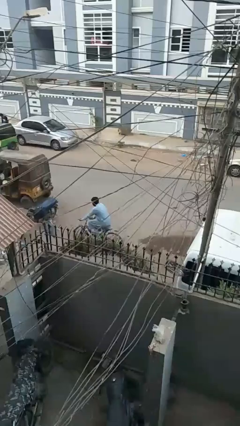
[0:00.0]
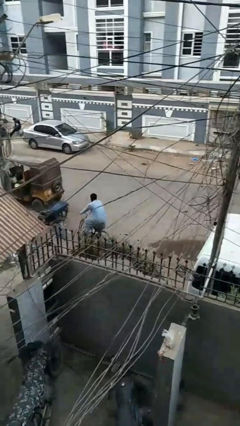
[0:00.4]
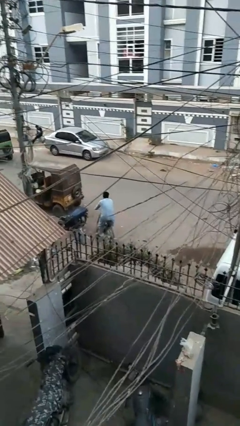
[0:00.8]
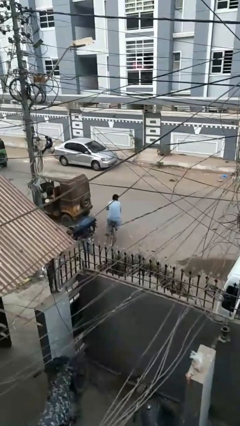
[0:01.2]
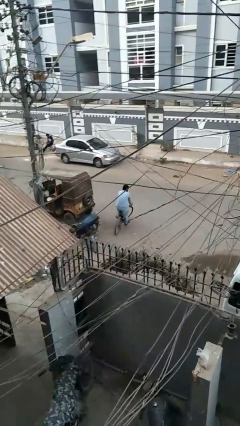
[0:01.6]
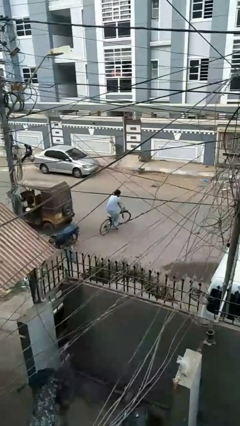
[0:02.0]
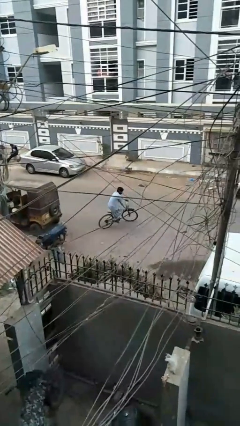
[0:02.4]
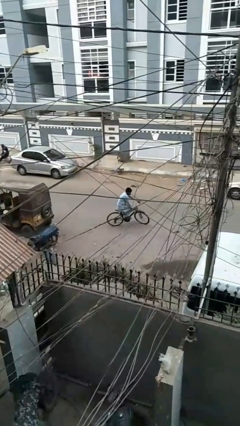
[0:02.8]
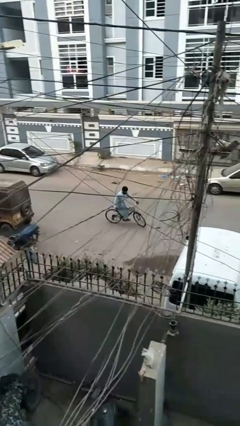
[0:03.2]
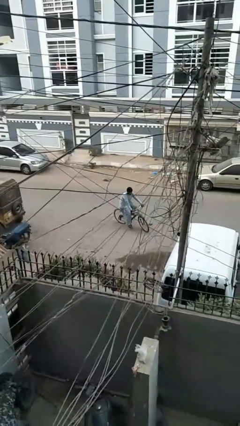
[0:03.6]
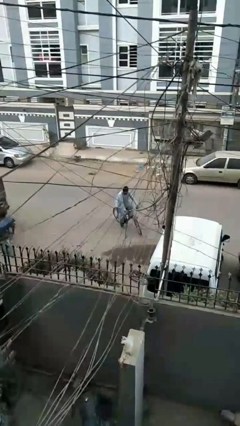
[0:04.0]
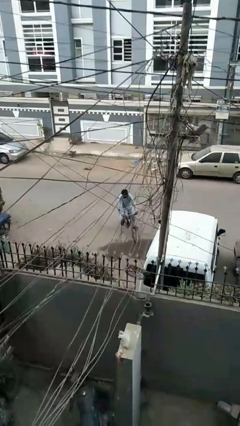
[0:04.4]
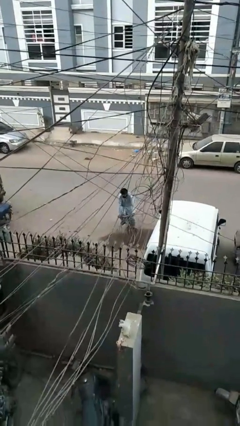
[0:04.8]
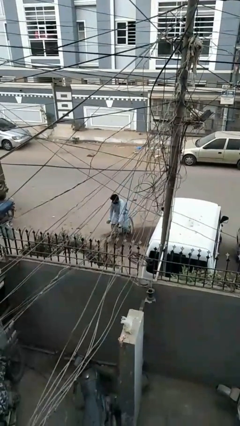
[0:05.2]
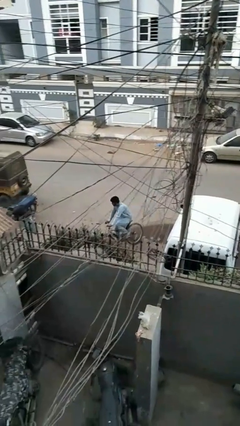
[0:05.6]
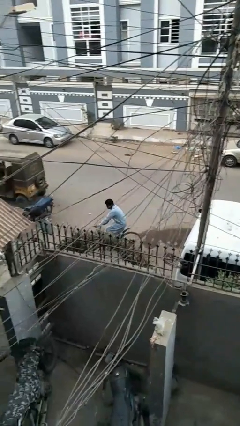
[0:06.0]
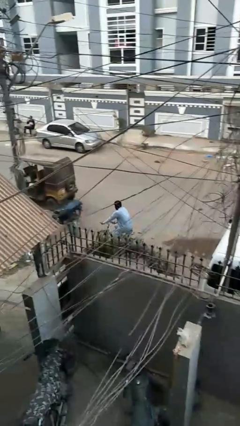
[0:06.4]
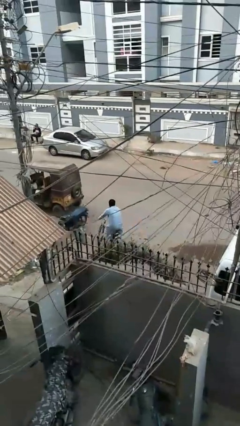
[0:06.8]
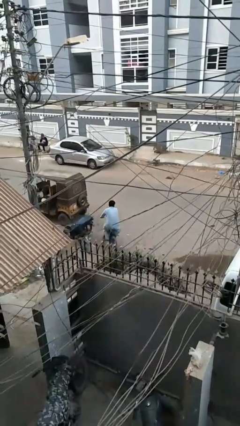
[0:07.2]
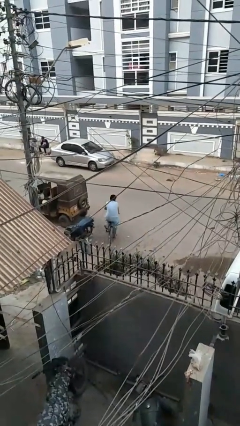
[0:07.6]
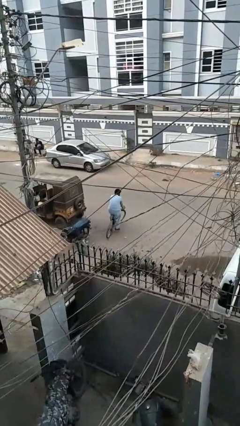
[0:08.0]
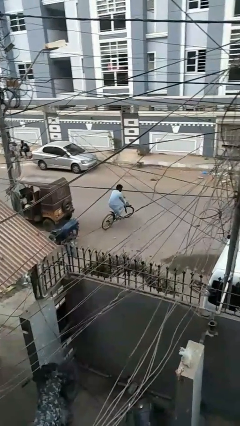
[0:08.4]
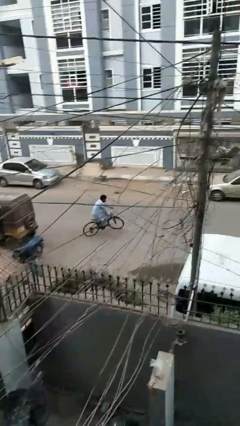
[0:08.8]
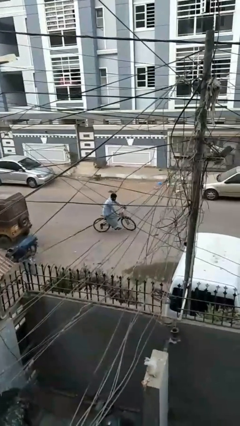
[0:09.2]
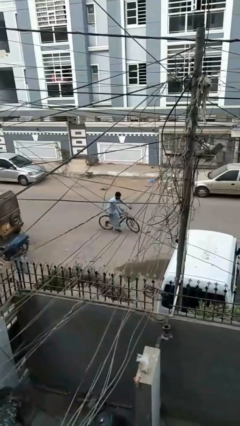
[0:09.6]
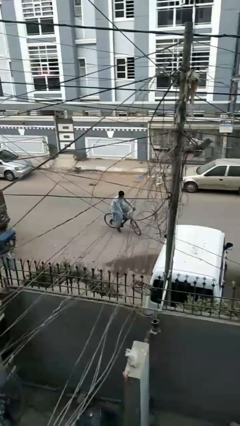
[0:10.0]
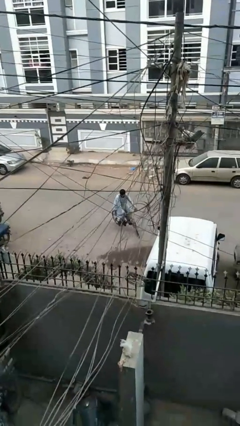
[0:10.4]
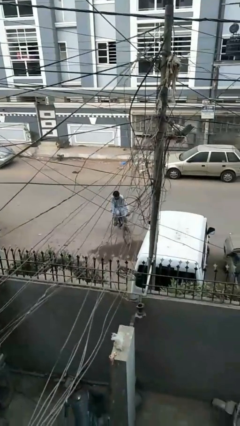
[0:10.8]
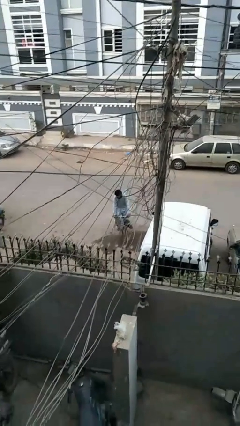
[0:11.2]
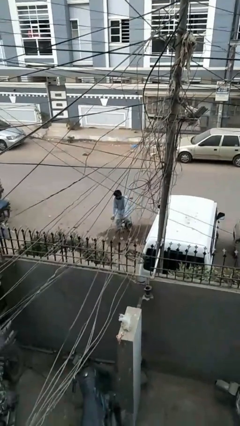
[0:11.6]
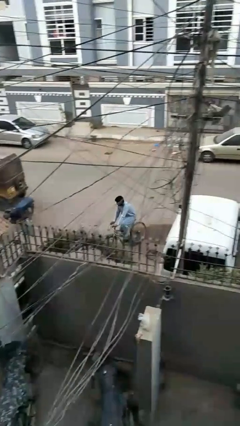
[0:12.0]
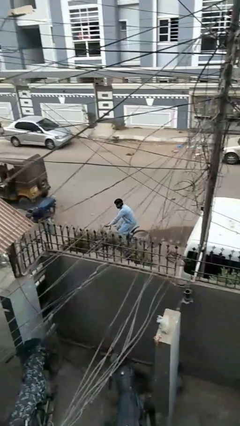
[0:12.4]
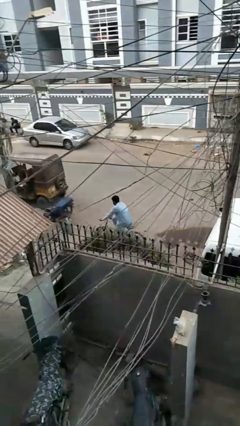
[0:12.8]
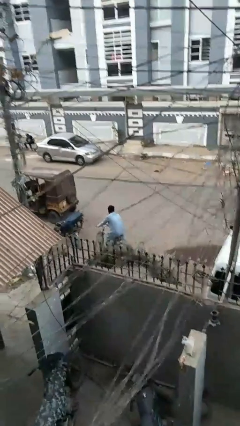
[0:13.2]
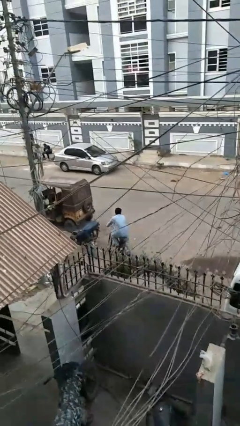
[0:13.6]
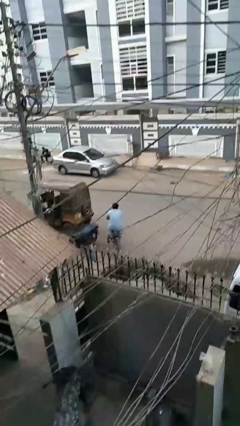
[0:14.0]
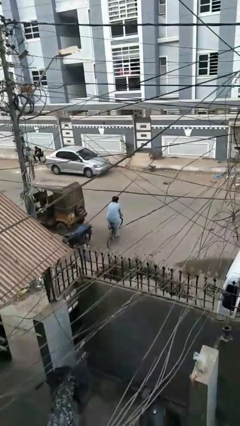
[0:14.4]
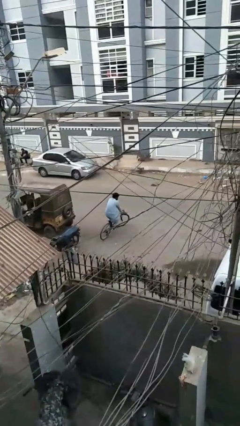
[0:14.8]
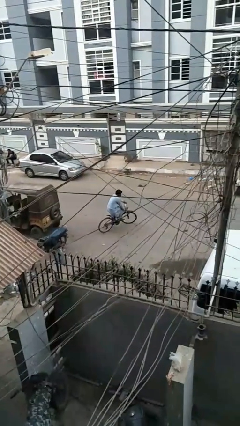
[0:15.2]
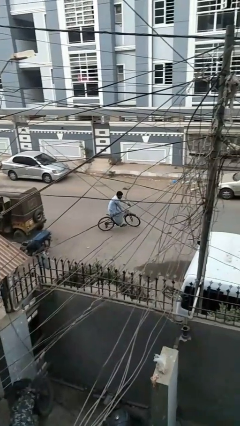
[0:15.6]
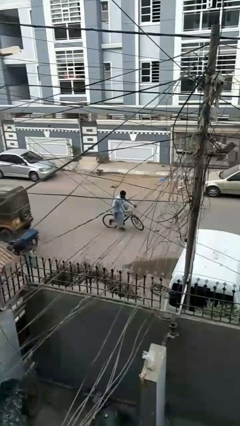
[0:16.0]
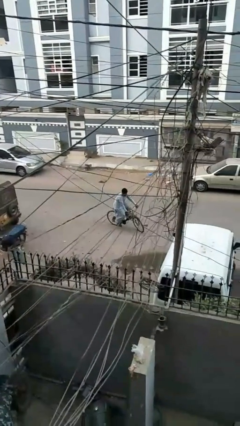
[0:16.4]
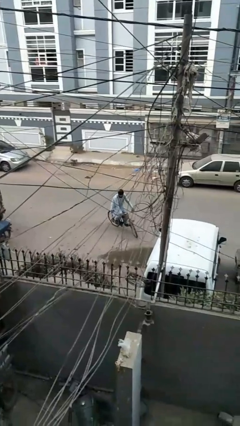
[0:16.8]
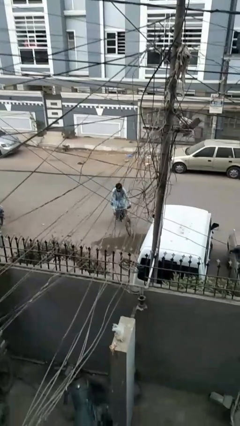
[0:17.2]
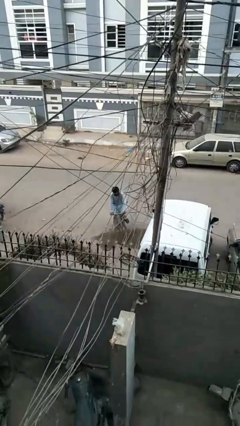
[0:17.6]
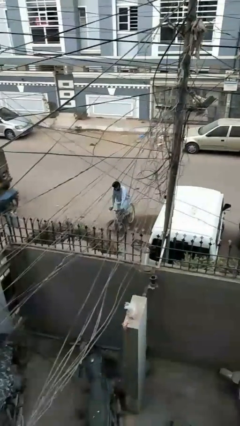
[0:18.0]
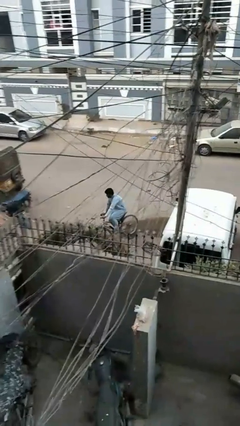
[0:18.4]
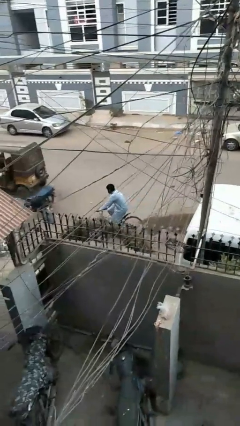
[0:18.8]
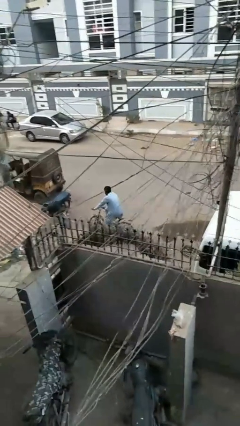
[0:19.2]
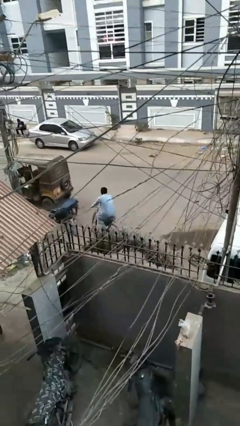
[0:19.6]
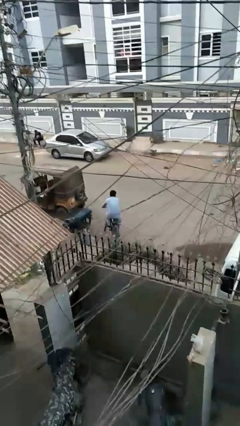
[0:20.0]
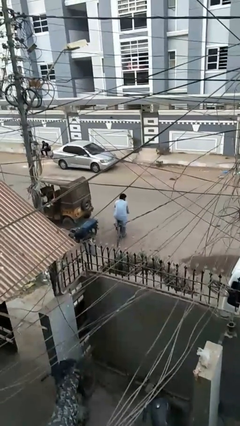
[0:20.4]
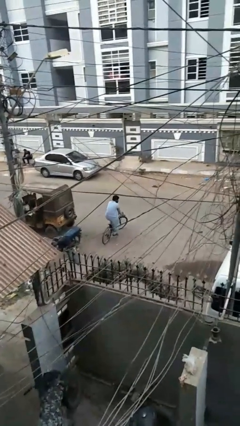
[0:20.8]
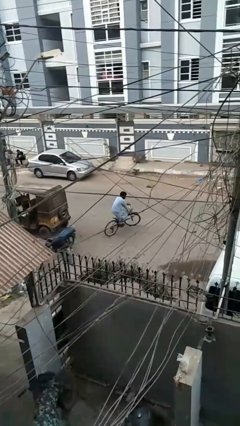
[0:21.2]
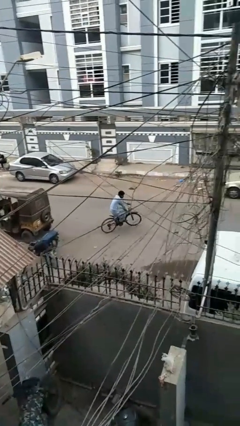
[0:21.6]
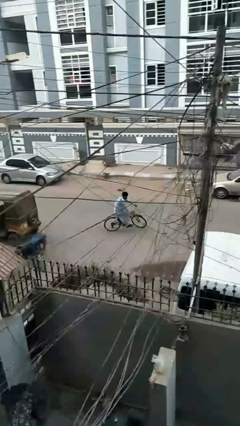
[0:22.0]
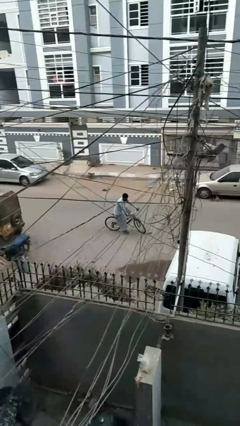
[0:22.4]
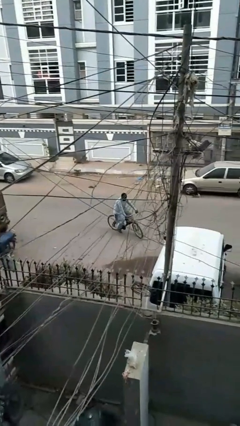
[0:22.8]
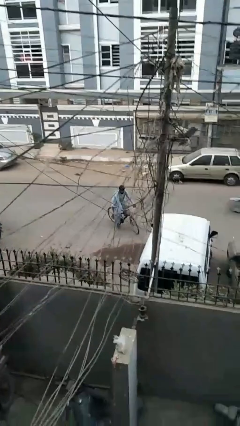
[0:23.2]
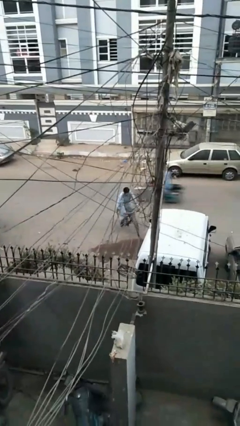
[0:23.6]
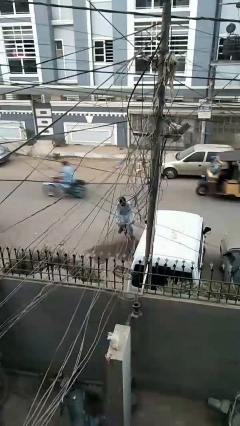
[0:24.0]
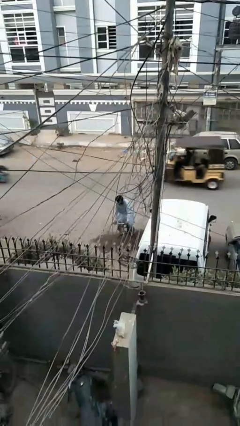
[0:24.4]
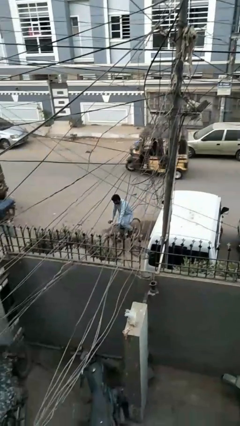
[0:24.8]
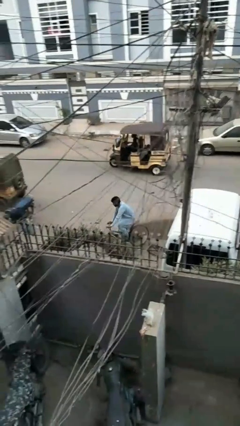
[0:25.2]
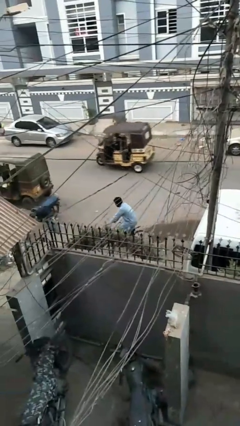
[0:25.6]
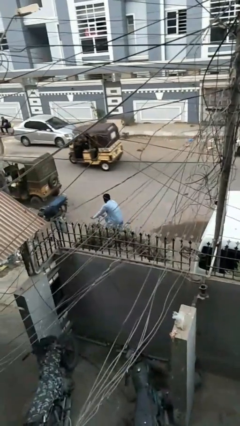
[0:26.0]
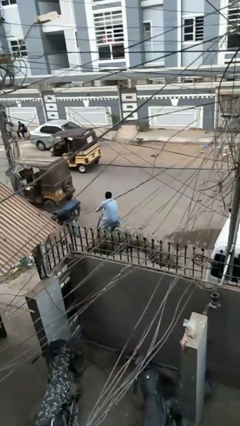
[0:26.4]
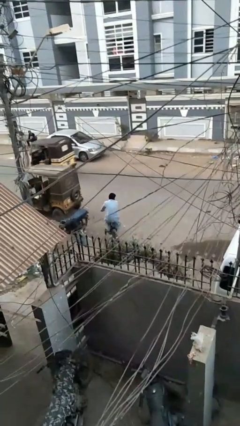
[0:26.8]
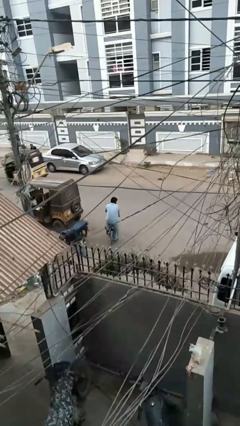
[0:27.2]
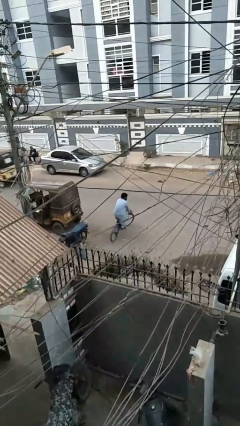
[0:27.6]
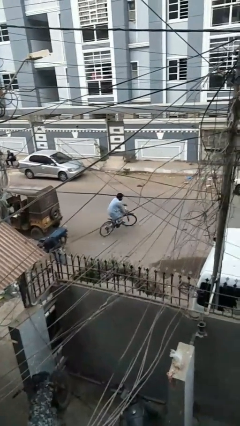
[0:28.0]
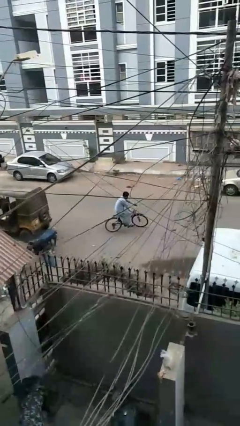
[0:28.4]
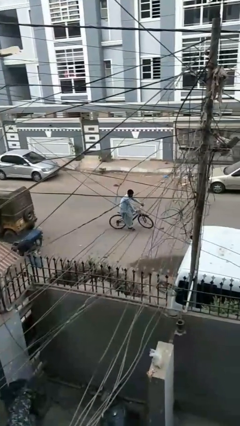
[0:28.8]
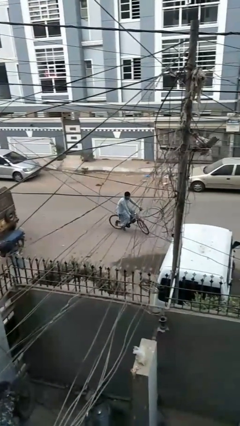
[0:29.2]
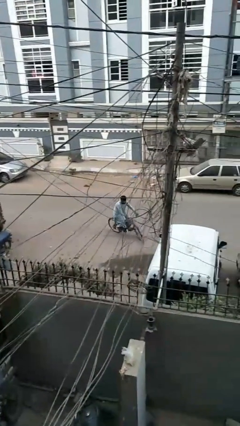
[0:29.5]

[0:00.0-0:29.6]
person rides bicycle

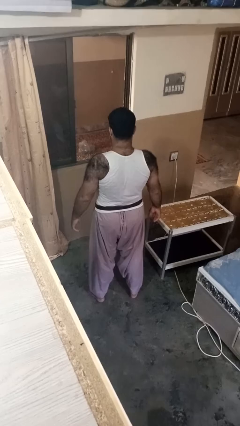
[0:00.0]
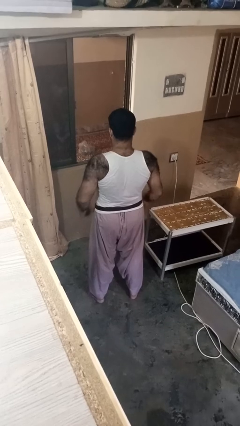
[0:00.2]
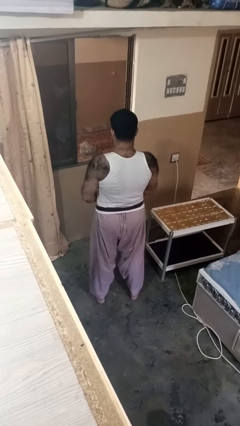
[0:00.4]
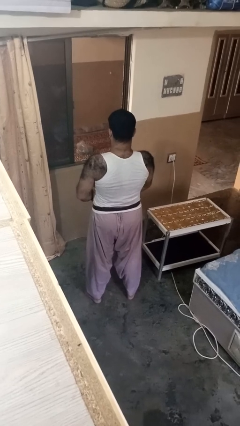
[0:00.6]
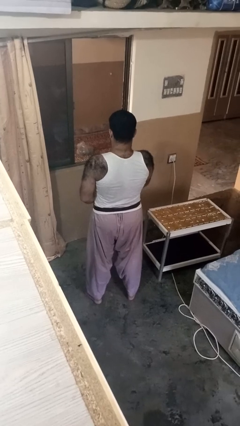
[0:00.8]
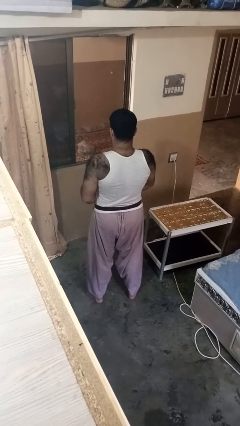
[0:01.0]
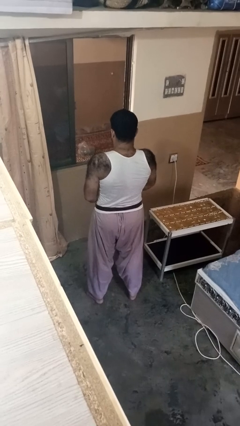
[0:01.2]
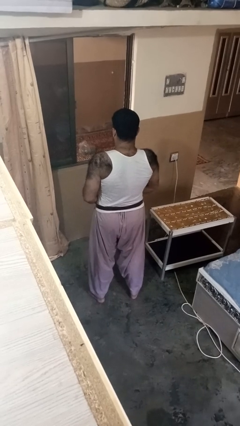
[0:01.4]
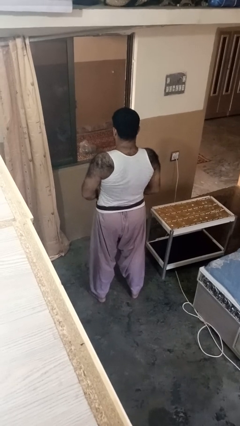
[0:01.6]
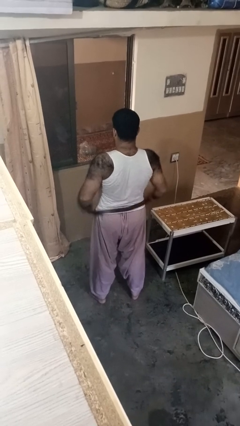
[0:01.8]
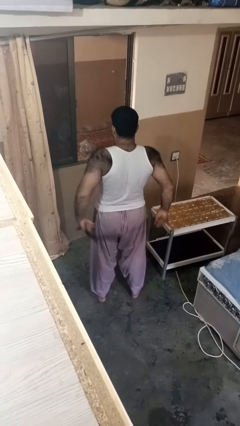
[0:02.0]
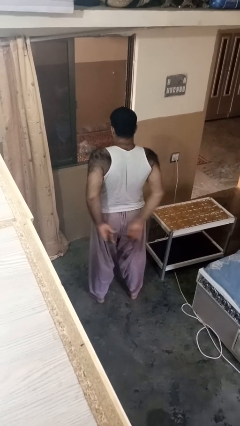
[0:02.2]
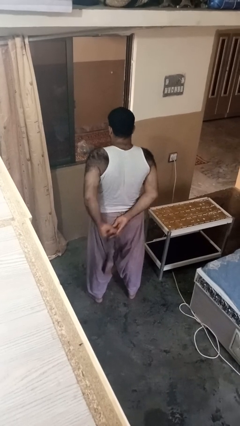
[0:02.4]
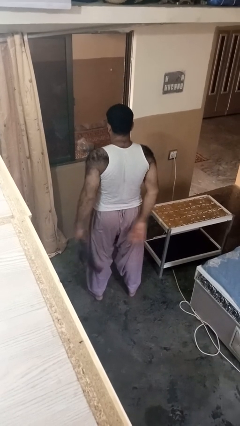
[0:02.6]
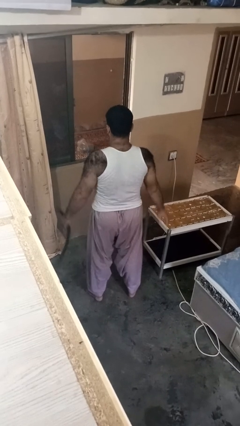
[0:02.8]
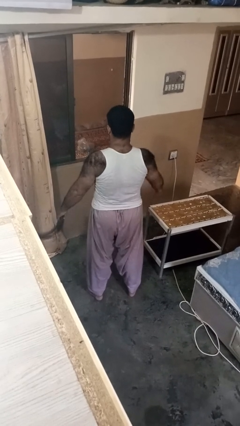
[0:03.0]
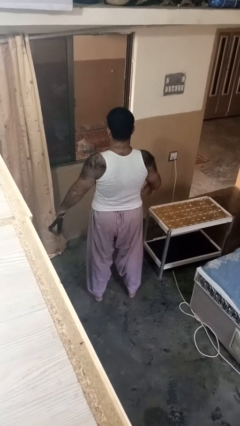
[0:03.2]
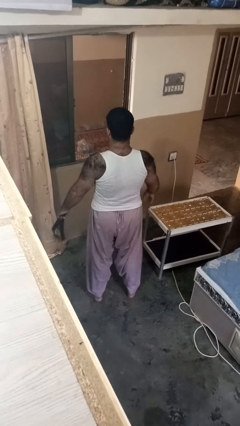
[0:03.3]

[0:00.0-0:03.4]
person takes off belt

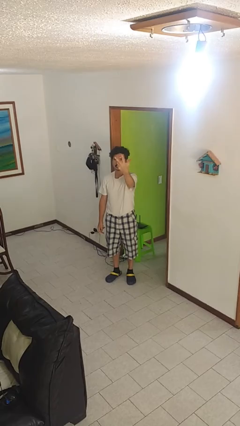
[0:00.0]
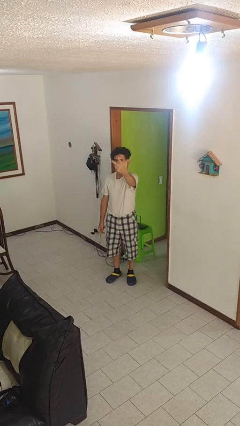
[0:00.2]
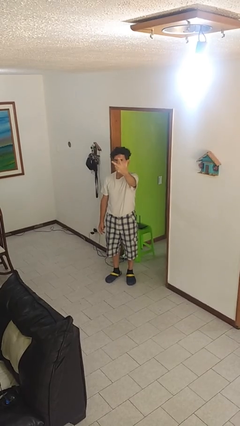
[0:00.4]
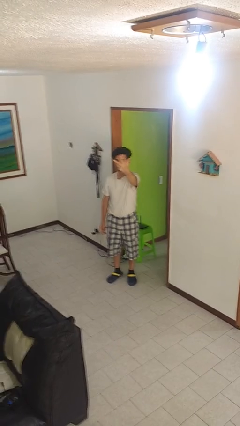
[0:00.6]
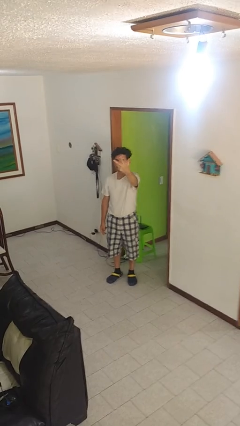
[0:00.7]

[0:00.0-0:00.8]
person gestures number three
